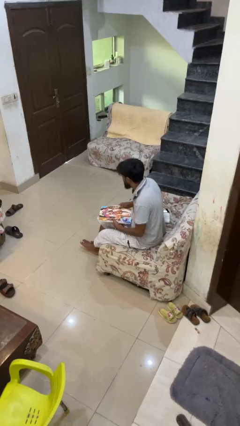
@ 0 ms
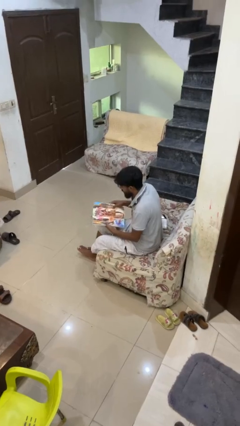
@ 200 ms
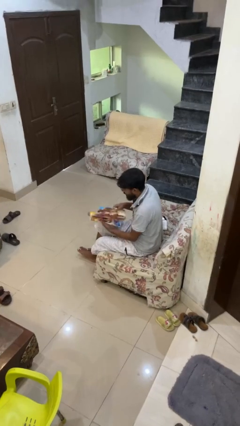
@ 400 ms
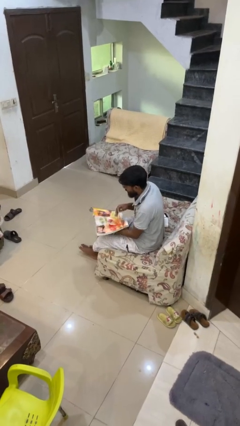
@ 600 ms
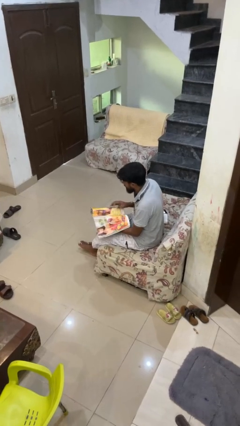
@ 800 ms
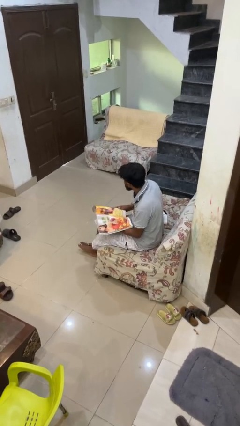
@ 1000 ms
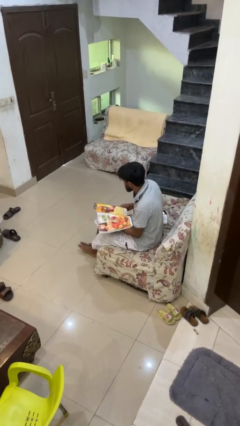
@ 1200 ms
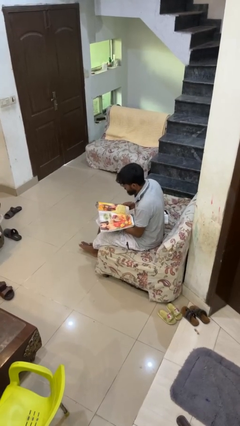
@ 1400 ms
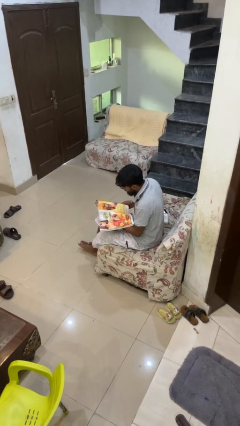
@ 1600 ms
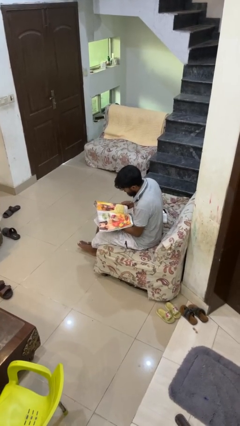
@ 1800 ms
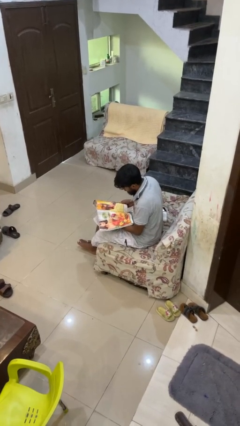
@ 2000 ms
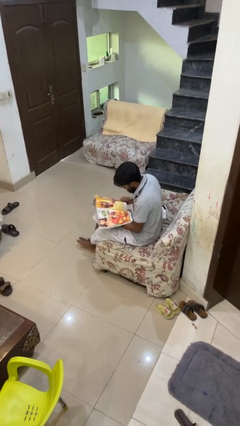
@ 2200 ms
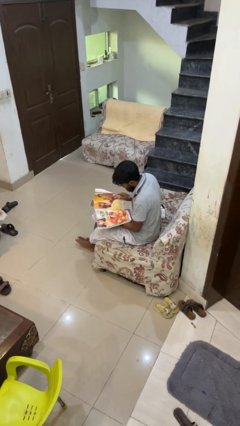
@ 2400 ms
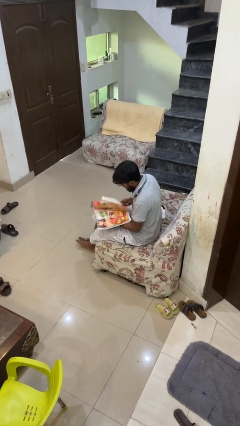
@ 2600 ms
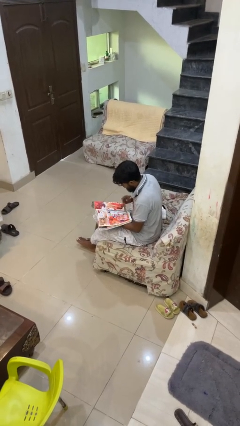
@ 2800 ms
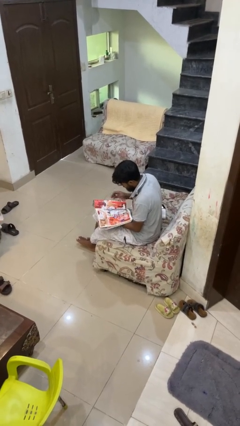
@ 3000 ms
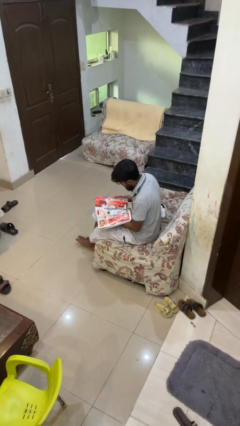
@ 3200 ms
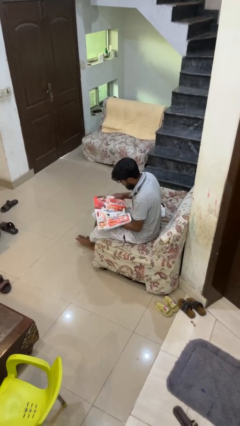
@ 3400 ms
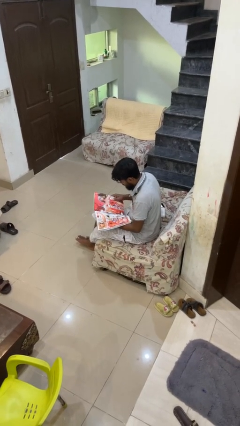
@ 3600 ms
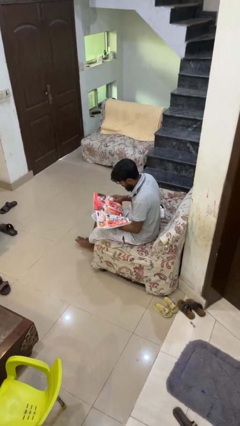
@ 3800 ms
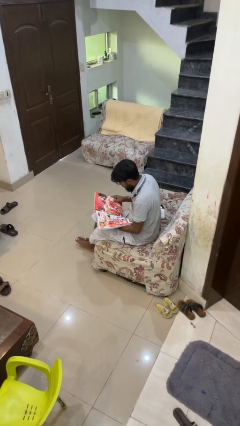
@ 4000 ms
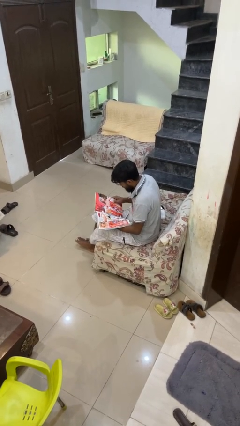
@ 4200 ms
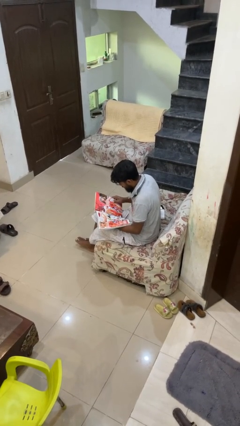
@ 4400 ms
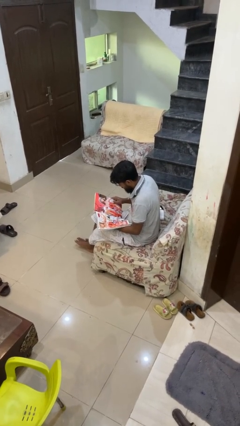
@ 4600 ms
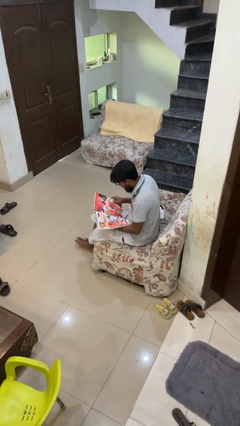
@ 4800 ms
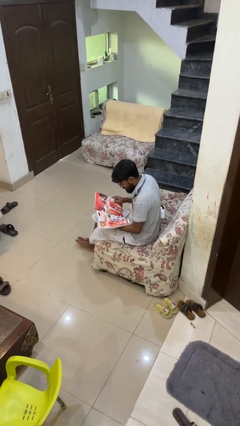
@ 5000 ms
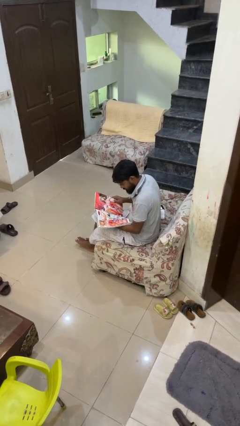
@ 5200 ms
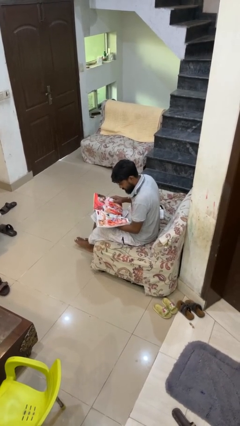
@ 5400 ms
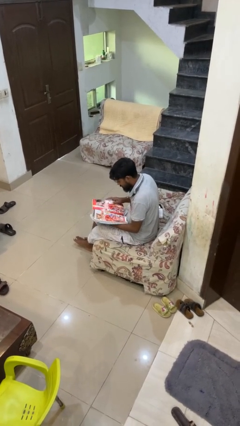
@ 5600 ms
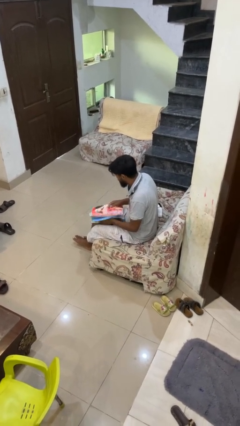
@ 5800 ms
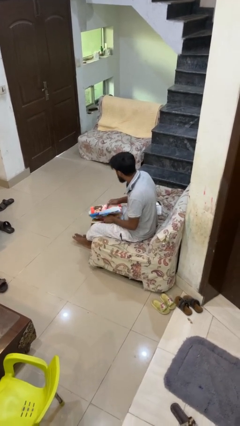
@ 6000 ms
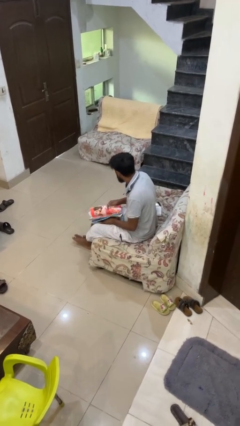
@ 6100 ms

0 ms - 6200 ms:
person reads magazine

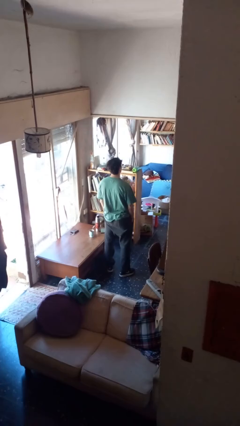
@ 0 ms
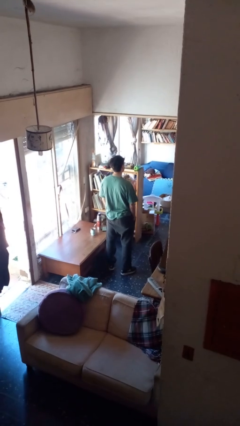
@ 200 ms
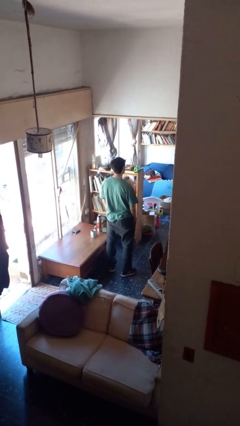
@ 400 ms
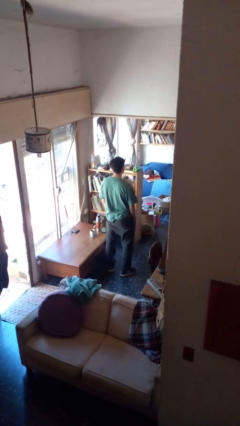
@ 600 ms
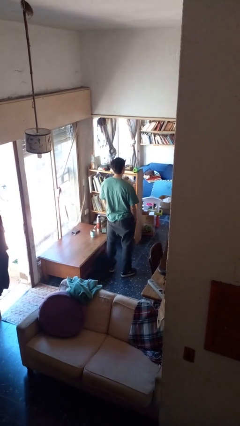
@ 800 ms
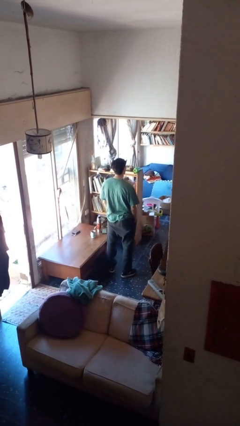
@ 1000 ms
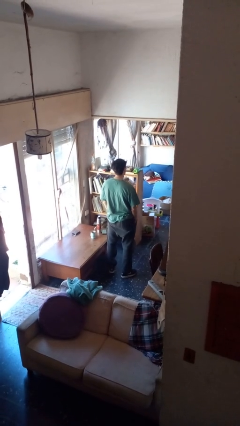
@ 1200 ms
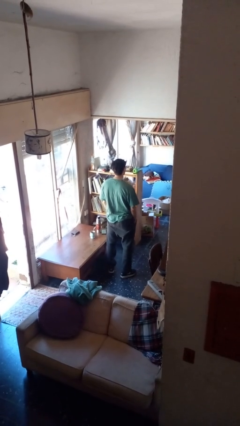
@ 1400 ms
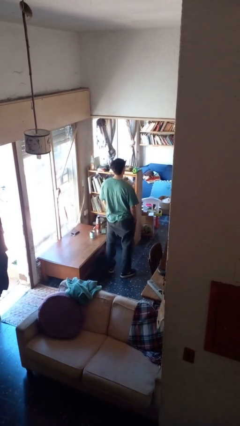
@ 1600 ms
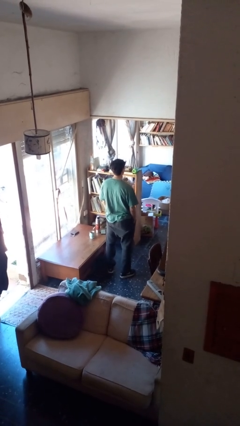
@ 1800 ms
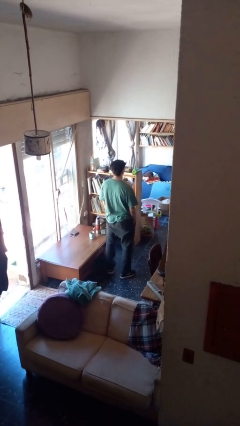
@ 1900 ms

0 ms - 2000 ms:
person sticks out tongue

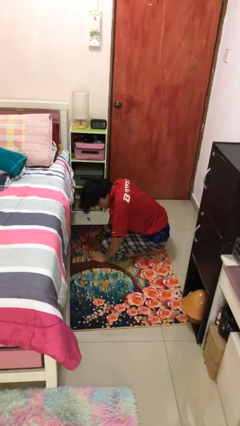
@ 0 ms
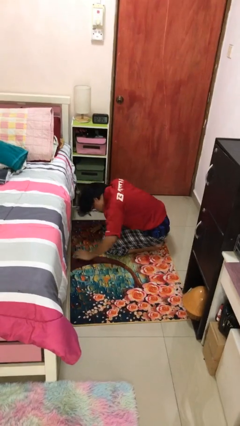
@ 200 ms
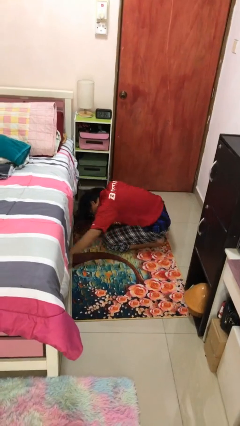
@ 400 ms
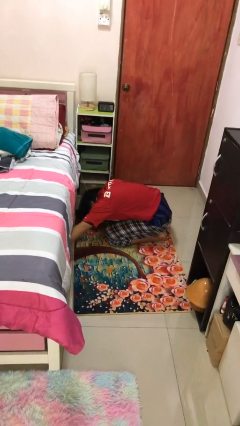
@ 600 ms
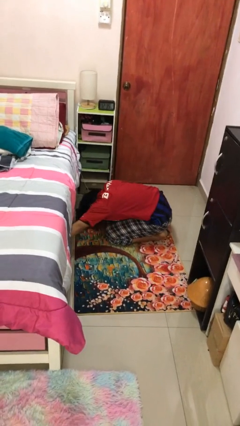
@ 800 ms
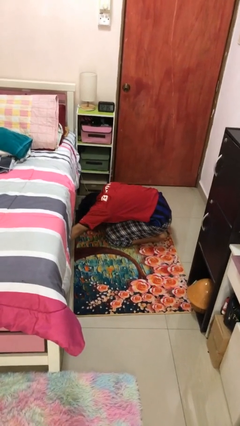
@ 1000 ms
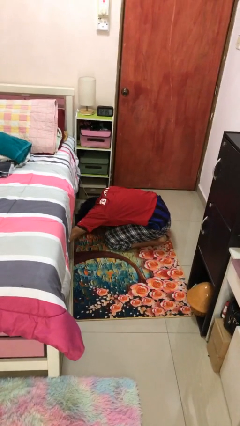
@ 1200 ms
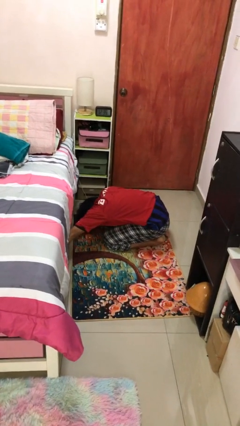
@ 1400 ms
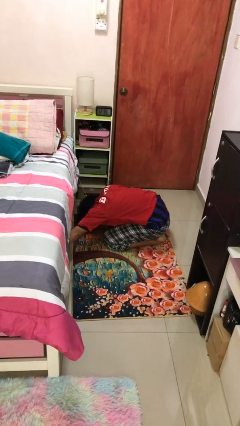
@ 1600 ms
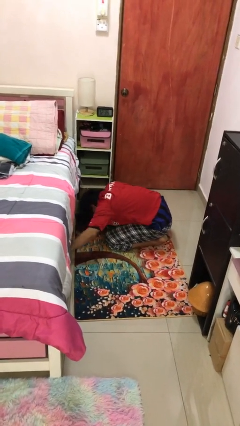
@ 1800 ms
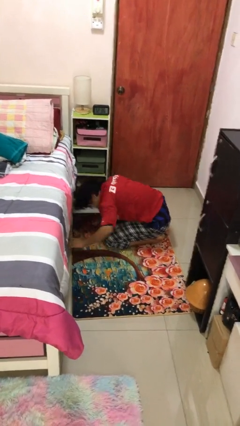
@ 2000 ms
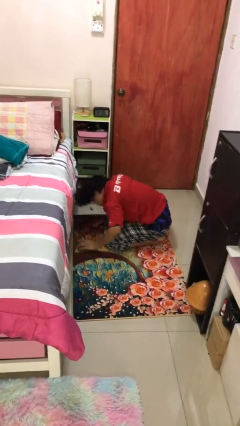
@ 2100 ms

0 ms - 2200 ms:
person searches under bed

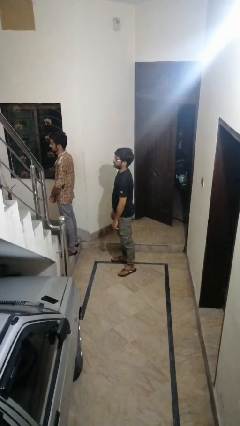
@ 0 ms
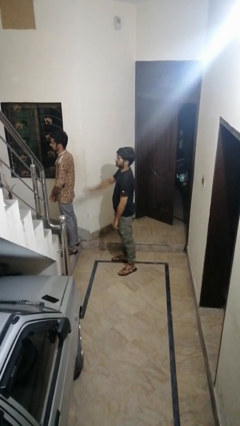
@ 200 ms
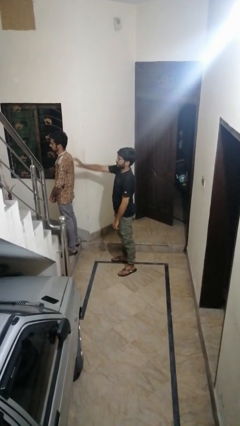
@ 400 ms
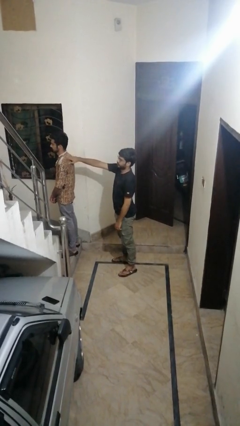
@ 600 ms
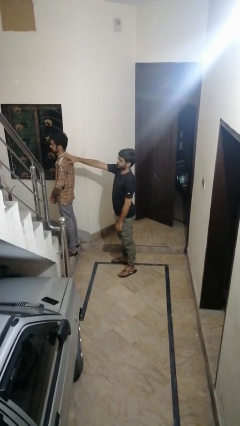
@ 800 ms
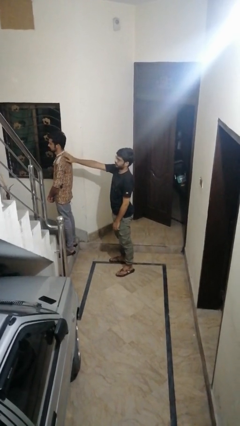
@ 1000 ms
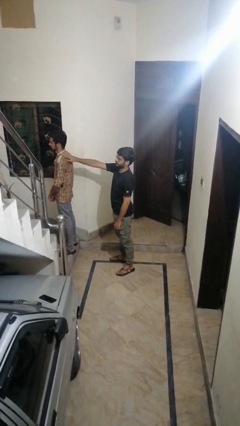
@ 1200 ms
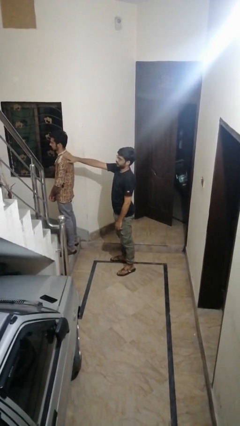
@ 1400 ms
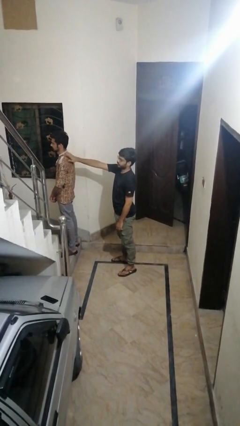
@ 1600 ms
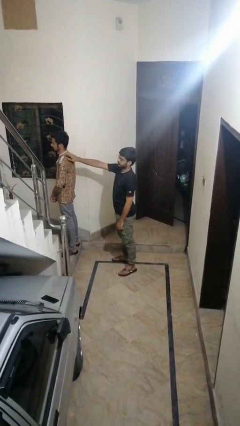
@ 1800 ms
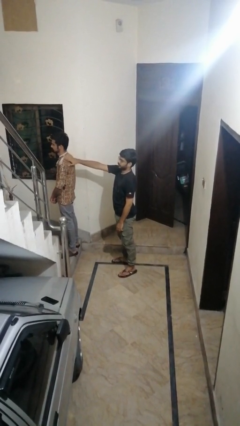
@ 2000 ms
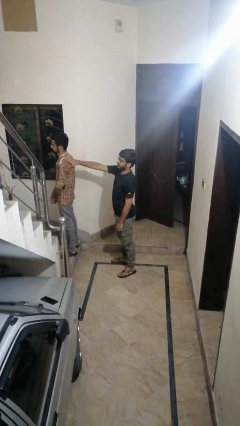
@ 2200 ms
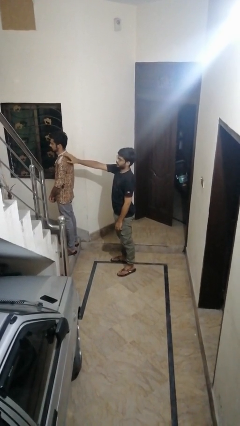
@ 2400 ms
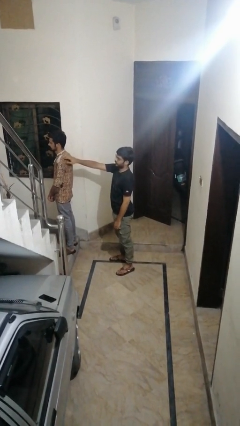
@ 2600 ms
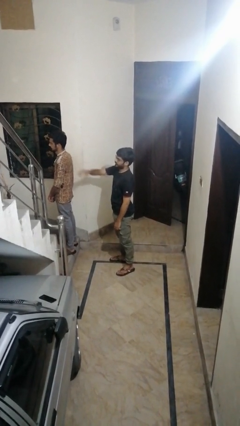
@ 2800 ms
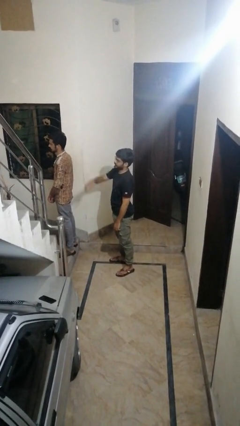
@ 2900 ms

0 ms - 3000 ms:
person touches back of person

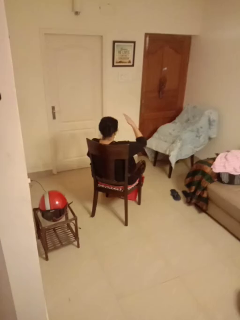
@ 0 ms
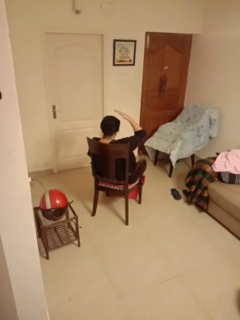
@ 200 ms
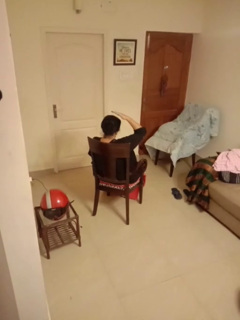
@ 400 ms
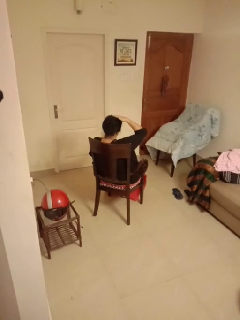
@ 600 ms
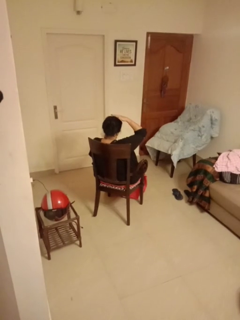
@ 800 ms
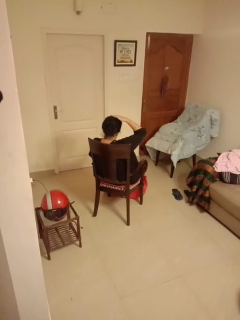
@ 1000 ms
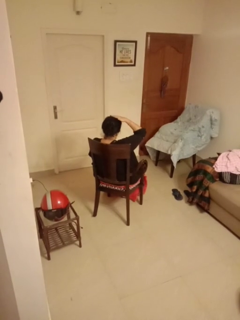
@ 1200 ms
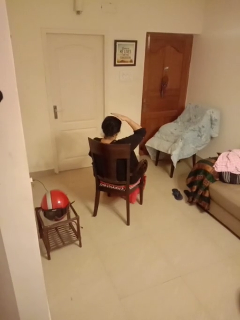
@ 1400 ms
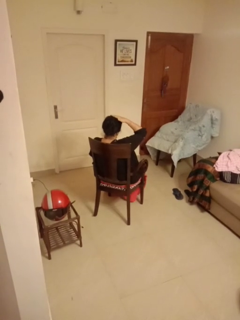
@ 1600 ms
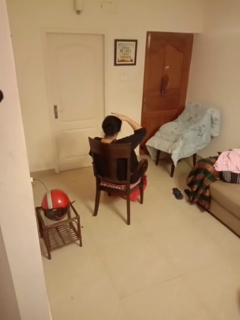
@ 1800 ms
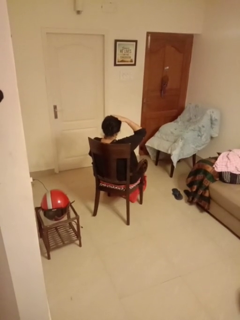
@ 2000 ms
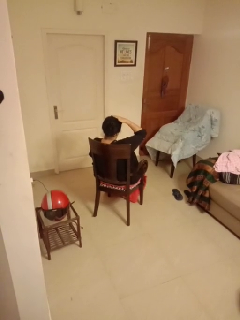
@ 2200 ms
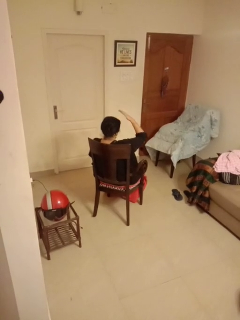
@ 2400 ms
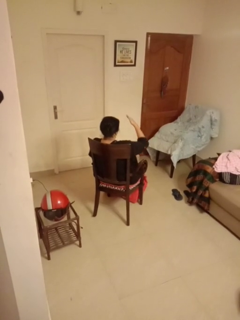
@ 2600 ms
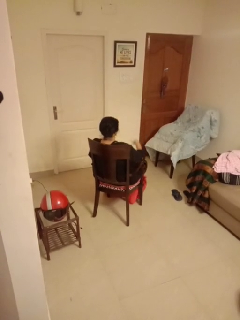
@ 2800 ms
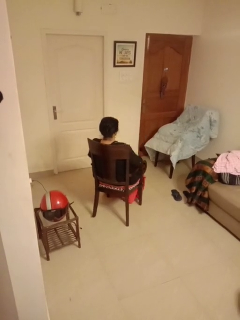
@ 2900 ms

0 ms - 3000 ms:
person pats head

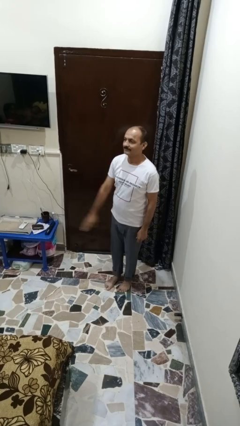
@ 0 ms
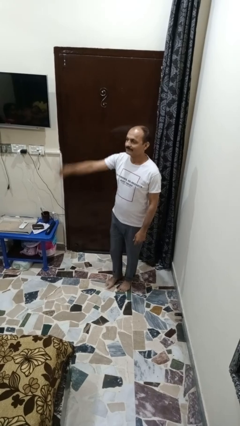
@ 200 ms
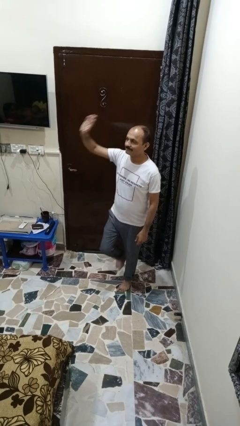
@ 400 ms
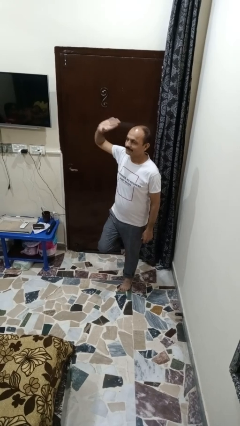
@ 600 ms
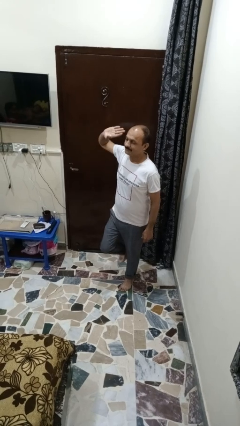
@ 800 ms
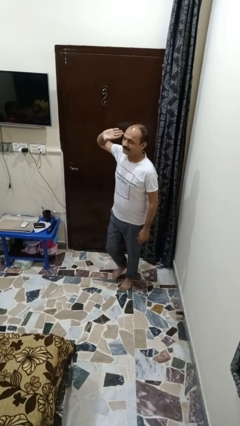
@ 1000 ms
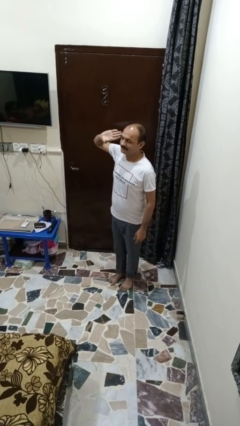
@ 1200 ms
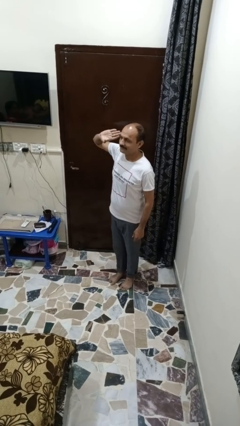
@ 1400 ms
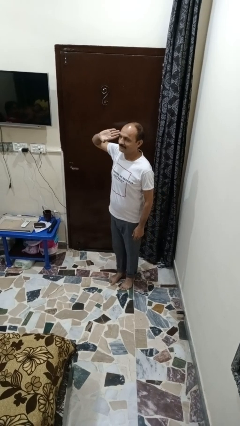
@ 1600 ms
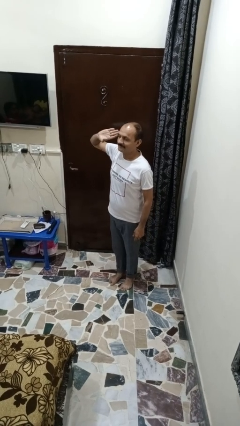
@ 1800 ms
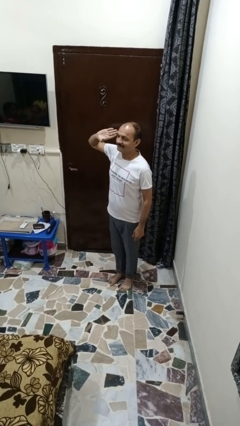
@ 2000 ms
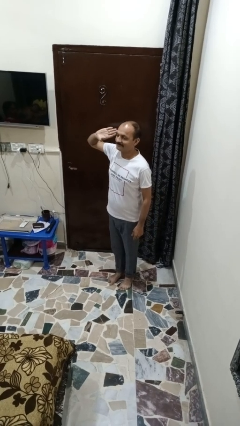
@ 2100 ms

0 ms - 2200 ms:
person salutes
